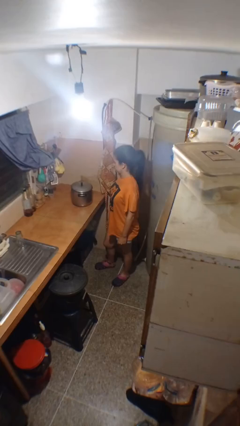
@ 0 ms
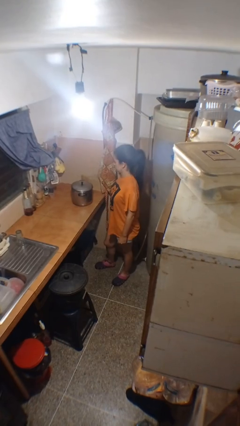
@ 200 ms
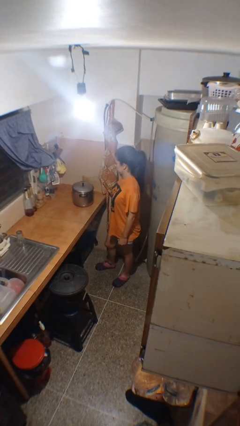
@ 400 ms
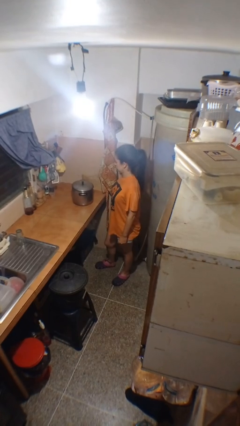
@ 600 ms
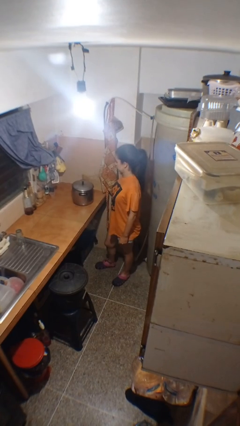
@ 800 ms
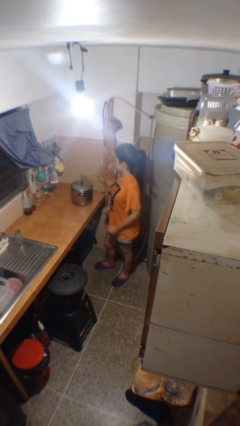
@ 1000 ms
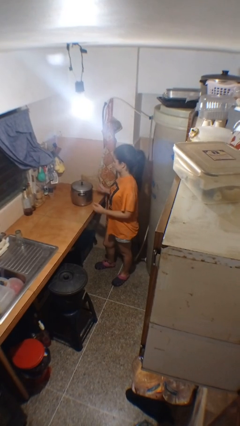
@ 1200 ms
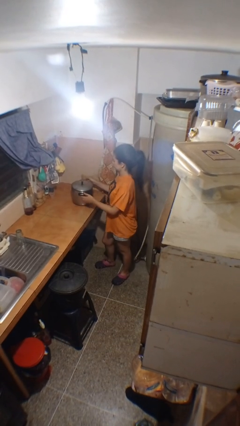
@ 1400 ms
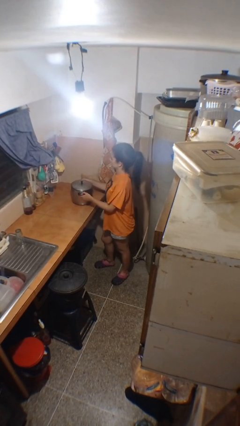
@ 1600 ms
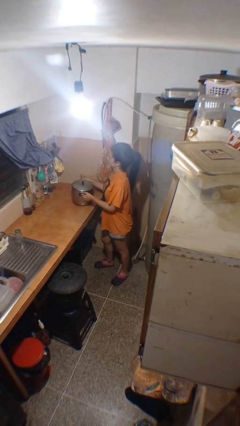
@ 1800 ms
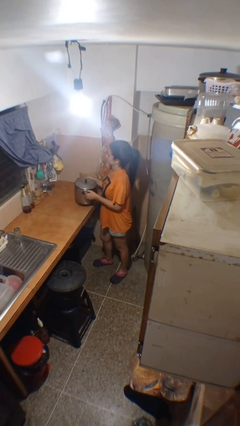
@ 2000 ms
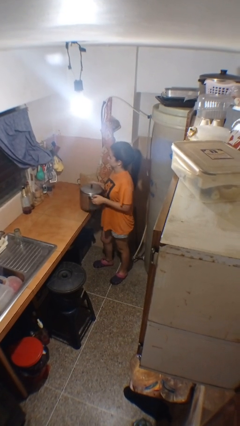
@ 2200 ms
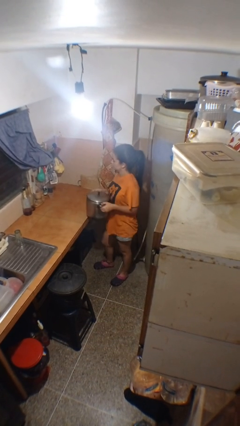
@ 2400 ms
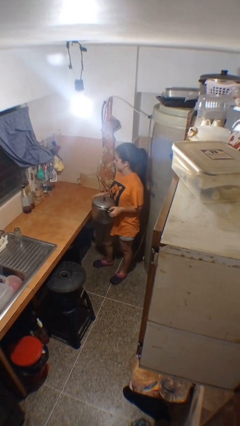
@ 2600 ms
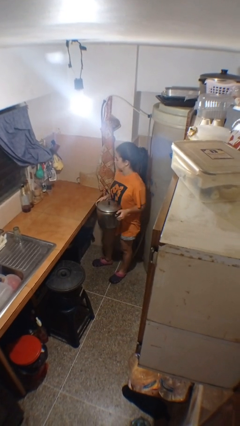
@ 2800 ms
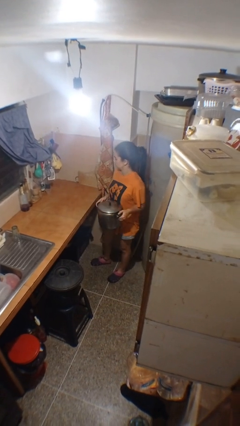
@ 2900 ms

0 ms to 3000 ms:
person picks up object from countertop

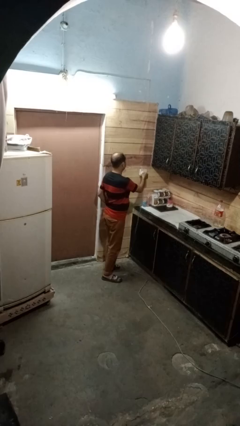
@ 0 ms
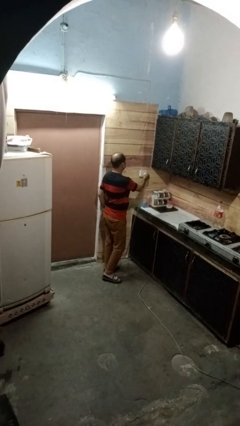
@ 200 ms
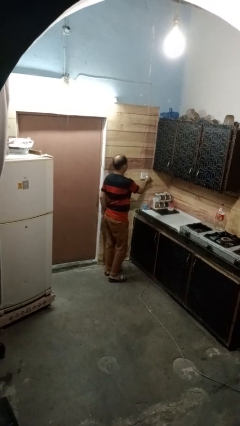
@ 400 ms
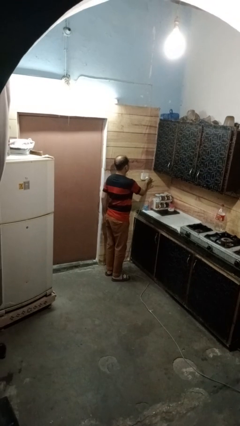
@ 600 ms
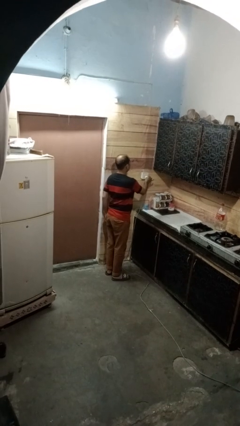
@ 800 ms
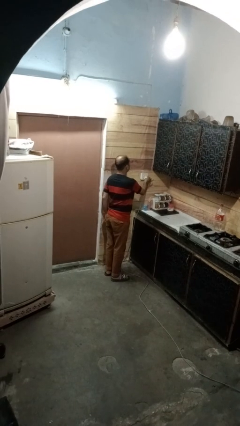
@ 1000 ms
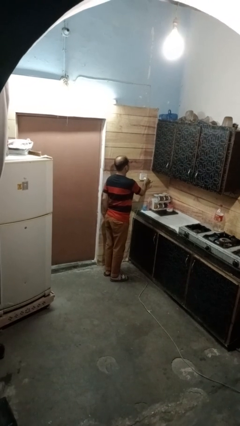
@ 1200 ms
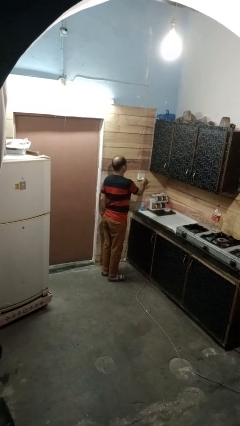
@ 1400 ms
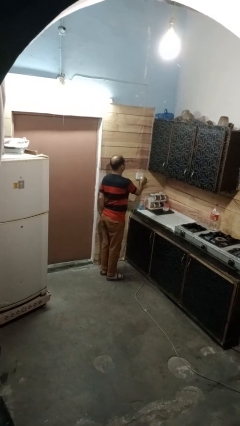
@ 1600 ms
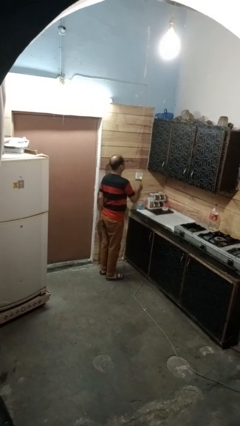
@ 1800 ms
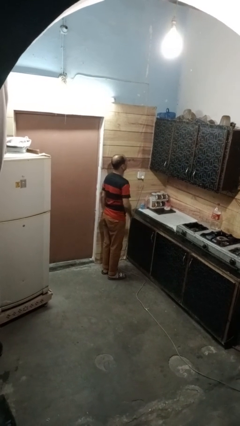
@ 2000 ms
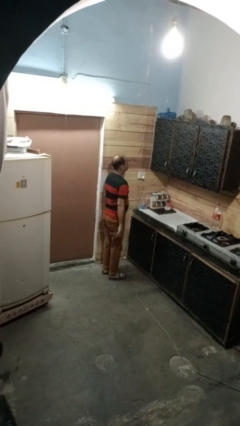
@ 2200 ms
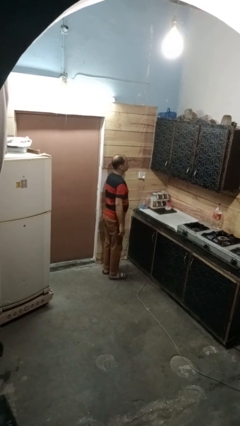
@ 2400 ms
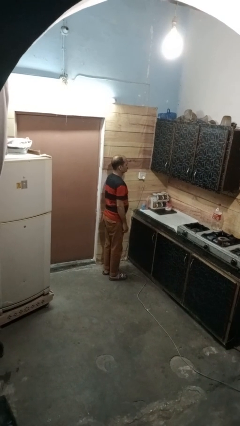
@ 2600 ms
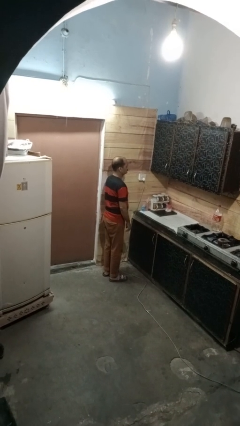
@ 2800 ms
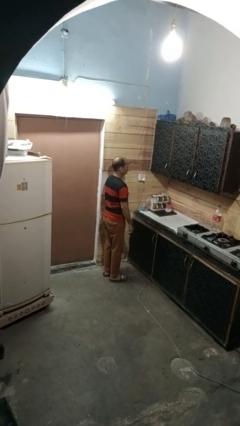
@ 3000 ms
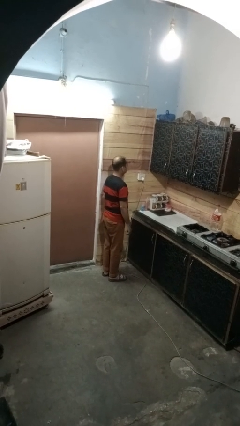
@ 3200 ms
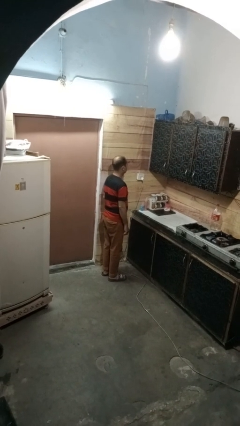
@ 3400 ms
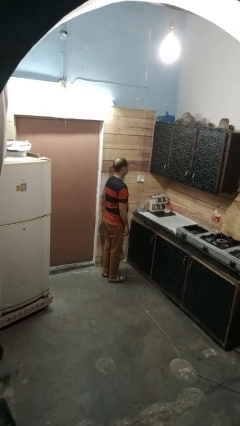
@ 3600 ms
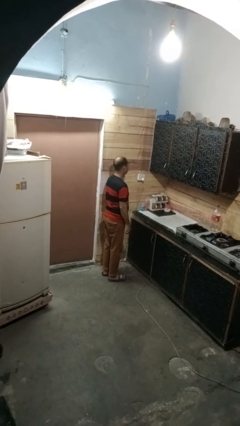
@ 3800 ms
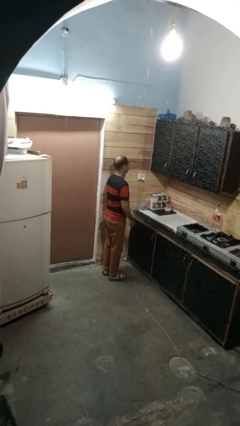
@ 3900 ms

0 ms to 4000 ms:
person plugs into electrical socket

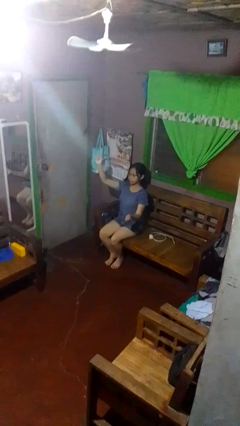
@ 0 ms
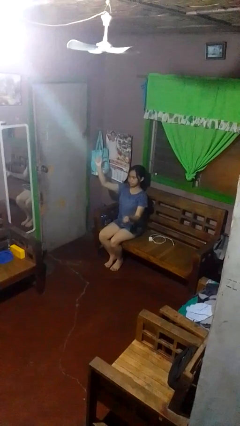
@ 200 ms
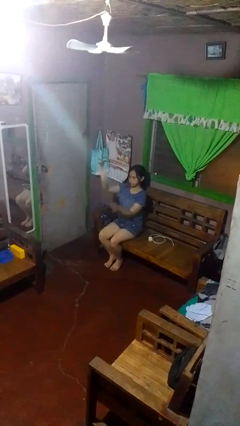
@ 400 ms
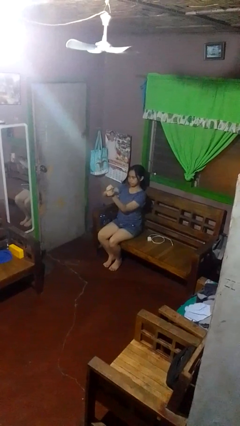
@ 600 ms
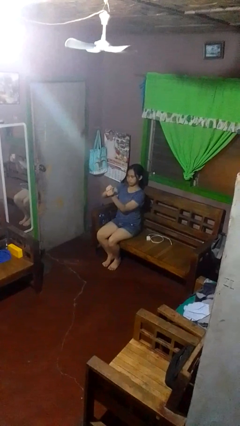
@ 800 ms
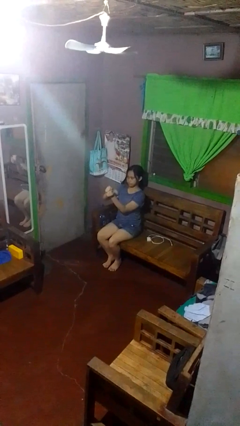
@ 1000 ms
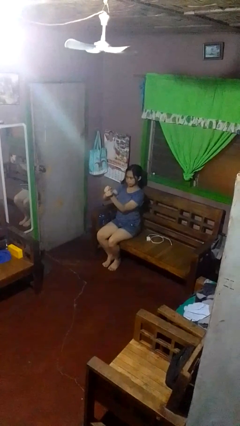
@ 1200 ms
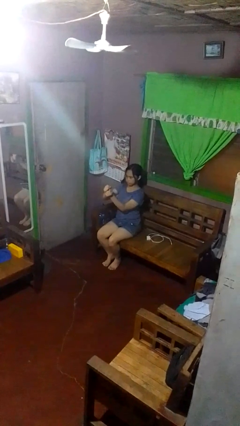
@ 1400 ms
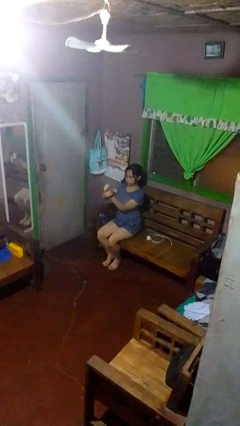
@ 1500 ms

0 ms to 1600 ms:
person gestures zoom out

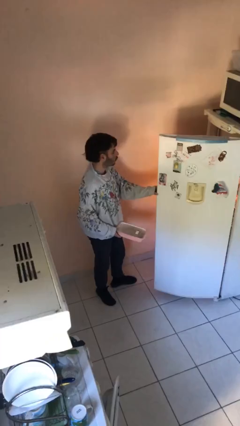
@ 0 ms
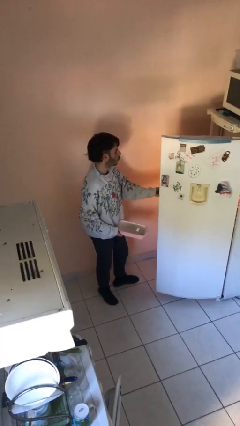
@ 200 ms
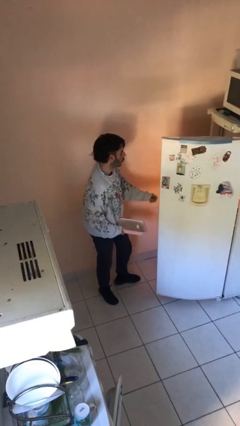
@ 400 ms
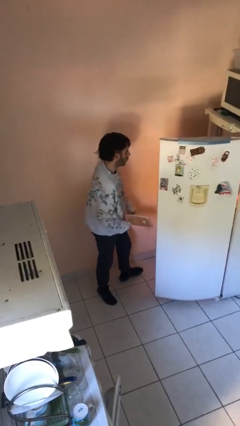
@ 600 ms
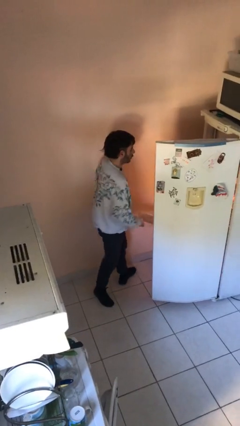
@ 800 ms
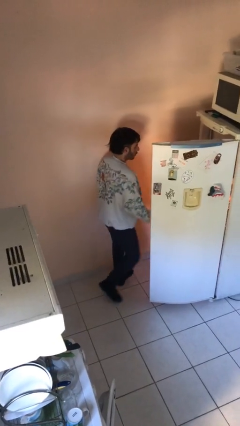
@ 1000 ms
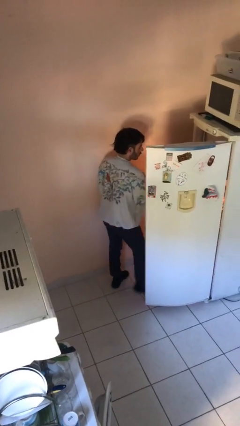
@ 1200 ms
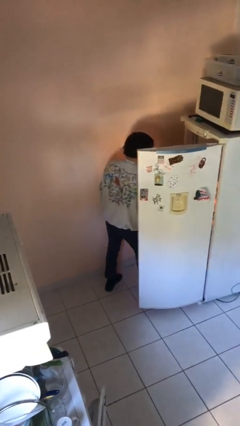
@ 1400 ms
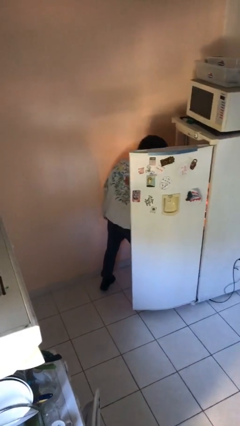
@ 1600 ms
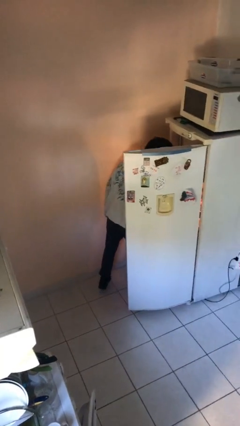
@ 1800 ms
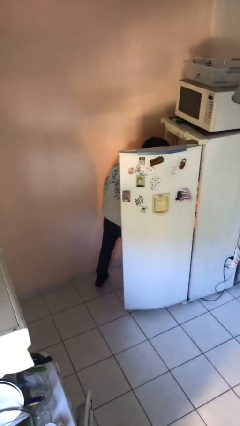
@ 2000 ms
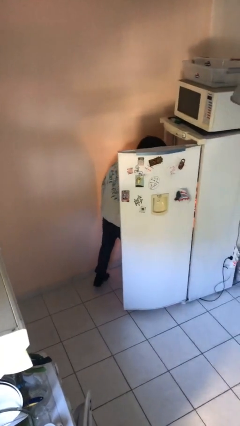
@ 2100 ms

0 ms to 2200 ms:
person puts object into refrigerator

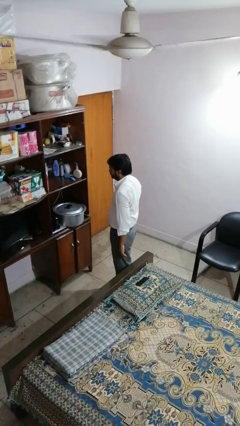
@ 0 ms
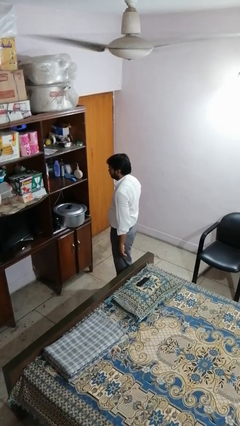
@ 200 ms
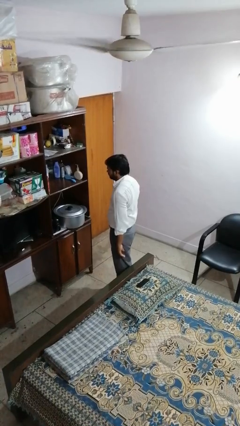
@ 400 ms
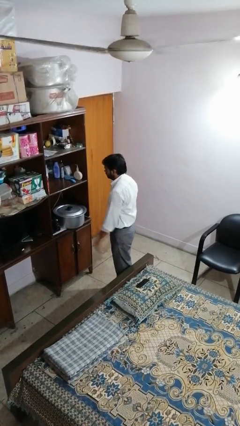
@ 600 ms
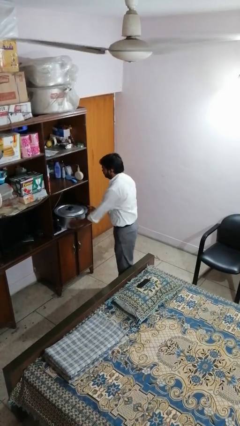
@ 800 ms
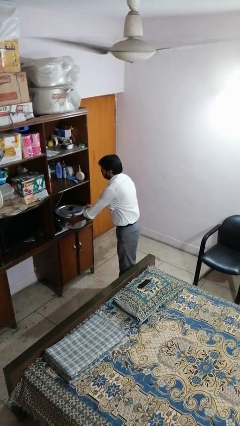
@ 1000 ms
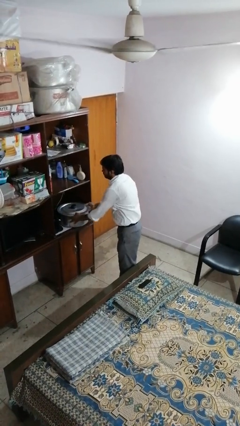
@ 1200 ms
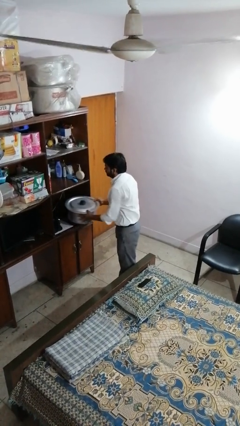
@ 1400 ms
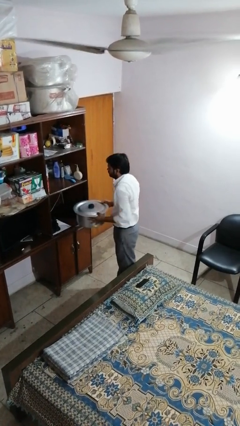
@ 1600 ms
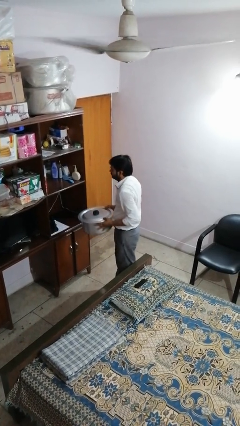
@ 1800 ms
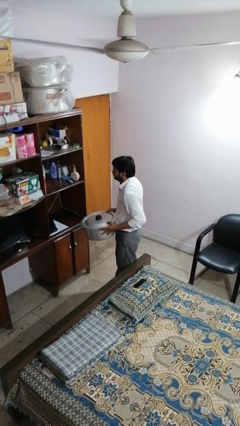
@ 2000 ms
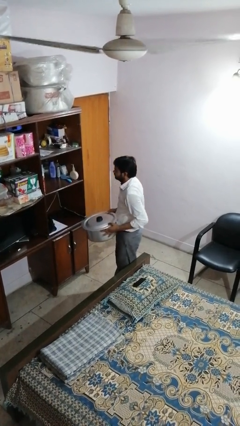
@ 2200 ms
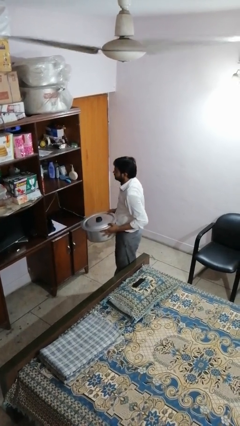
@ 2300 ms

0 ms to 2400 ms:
person picks up object from shelf

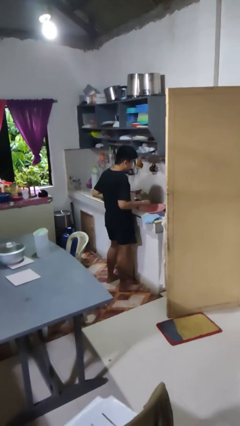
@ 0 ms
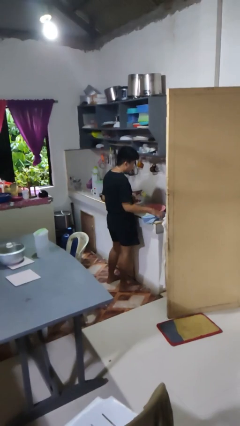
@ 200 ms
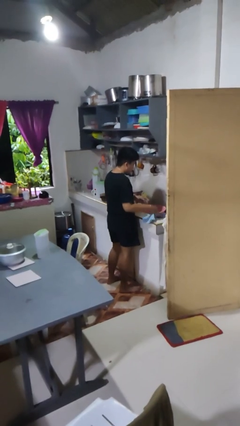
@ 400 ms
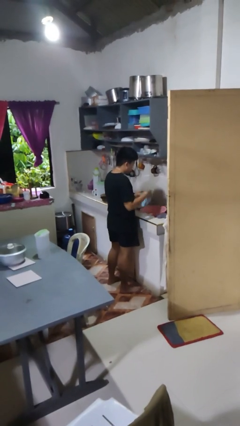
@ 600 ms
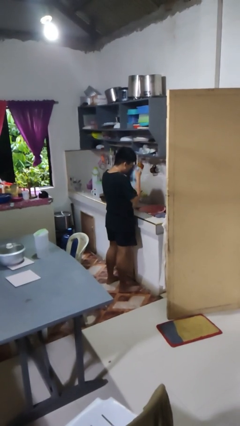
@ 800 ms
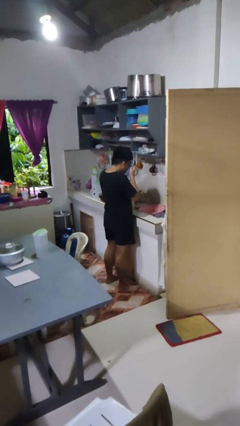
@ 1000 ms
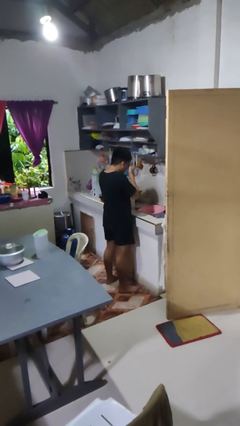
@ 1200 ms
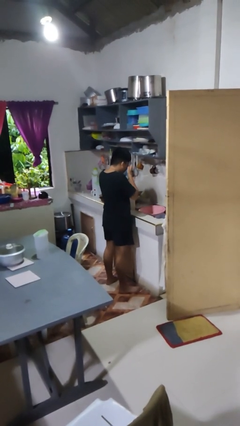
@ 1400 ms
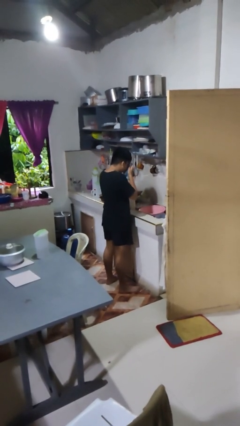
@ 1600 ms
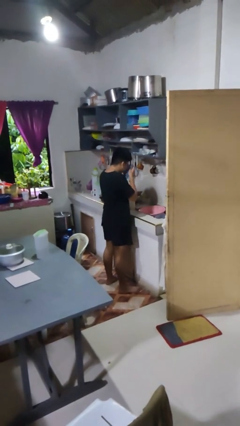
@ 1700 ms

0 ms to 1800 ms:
person dries face with towel

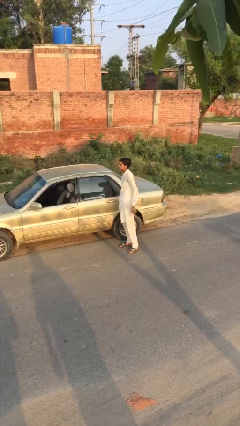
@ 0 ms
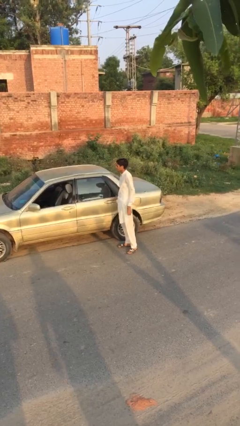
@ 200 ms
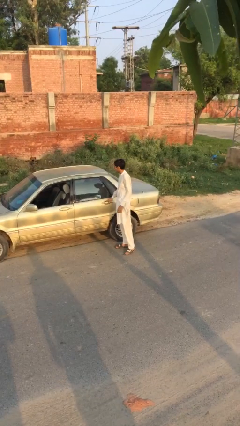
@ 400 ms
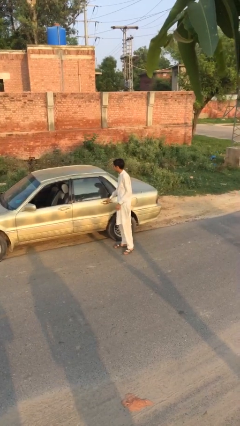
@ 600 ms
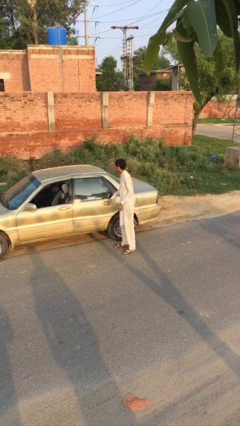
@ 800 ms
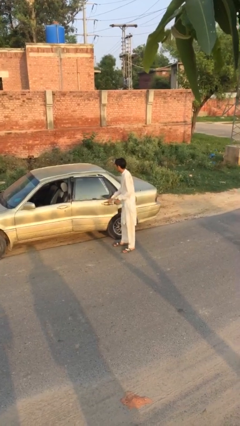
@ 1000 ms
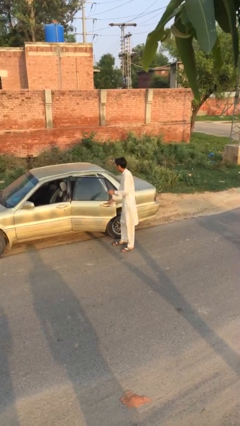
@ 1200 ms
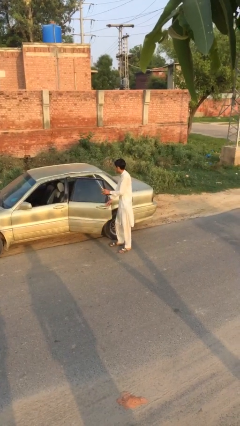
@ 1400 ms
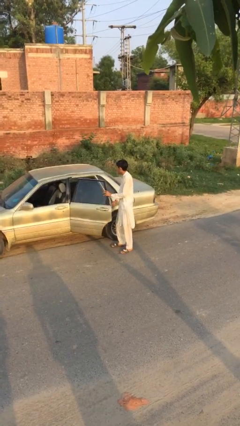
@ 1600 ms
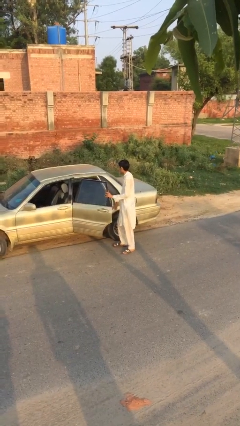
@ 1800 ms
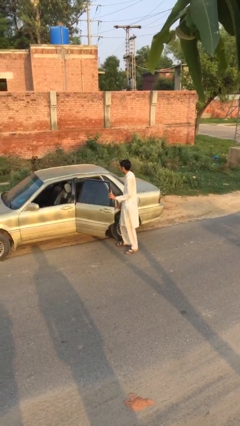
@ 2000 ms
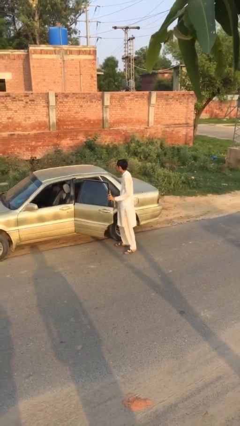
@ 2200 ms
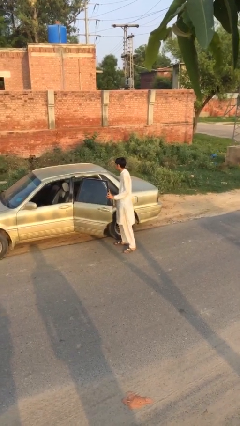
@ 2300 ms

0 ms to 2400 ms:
person opens car door
